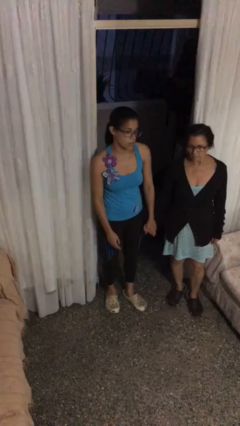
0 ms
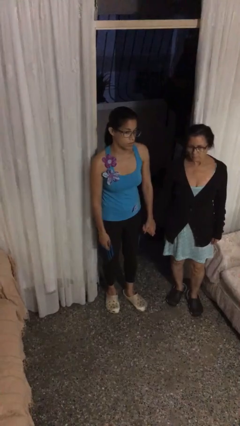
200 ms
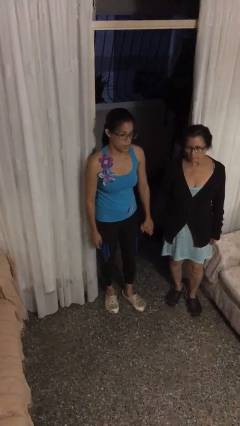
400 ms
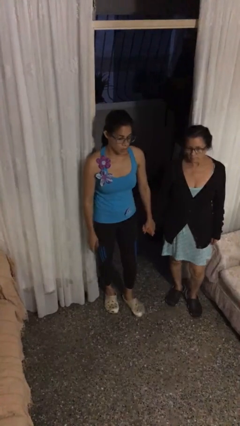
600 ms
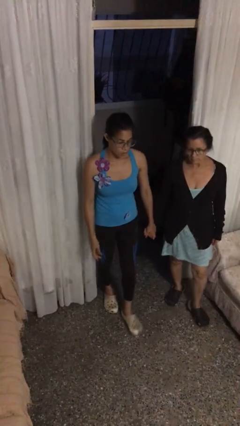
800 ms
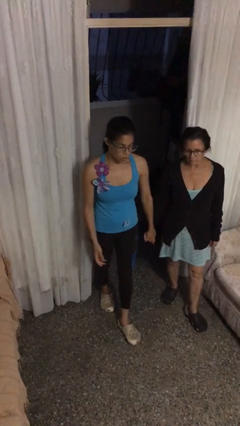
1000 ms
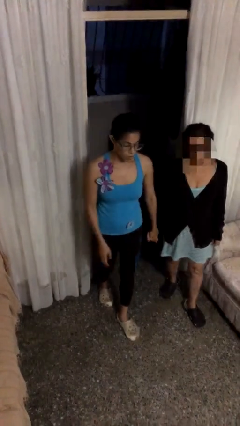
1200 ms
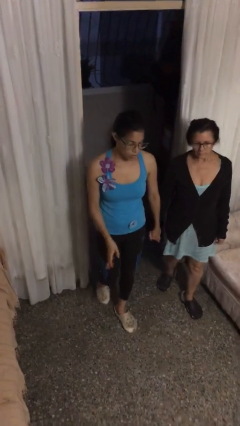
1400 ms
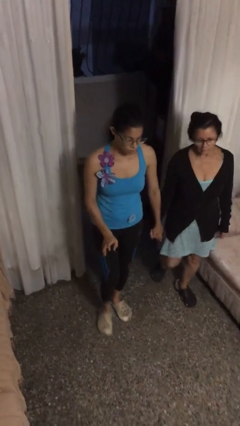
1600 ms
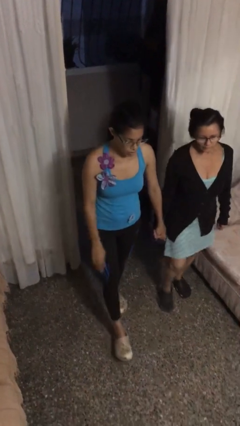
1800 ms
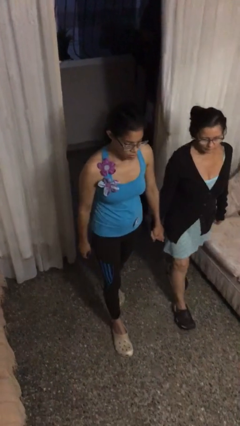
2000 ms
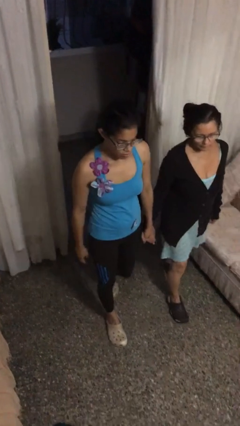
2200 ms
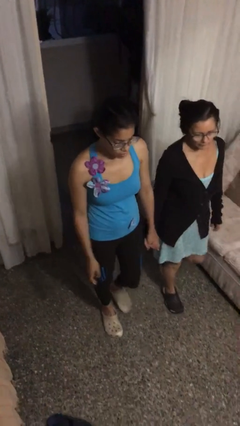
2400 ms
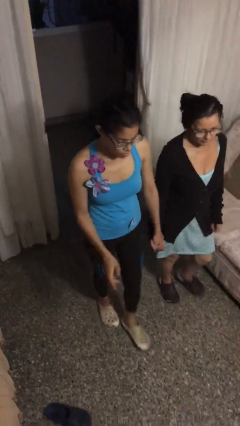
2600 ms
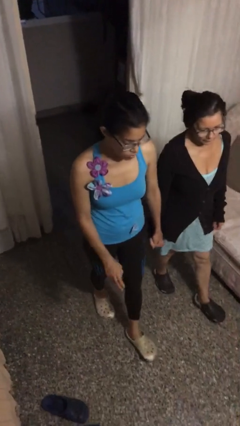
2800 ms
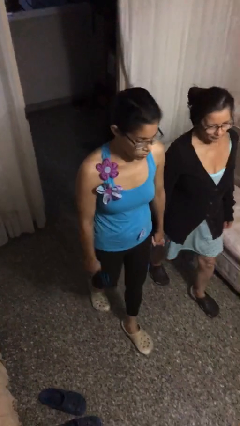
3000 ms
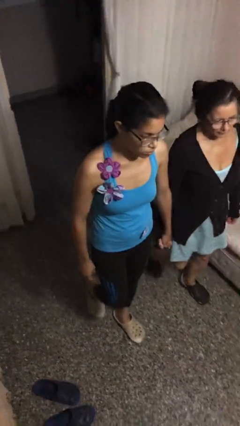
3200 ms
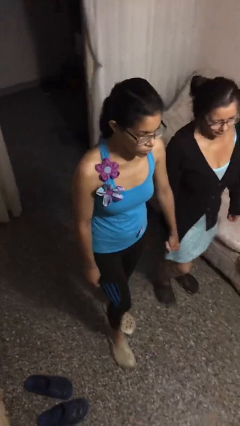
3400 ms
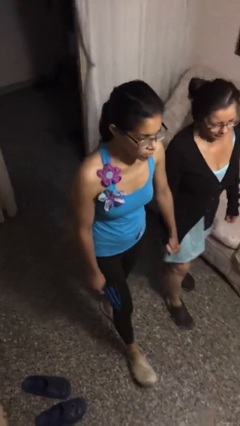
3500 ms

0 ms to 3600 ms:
person holds hand

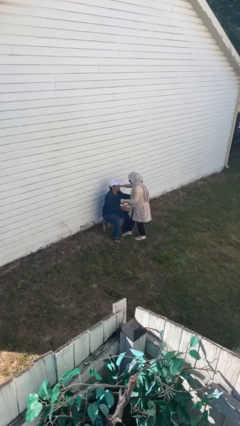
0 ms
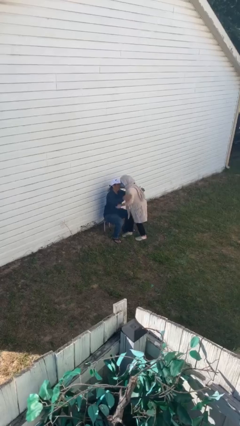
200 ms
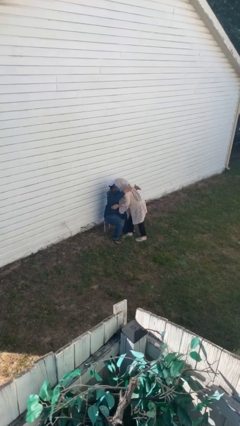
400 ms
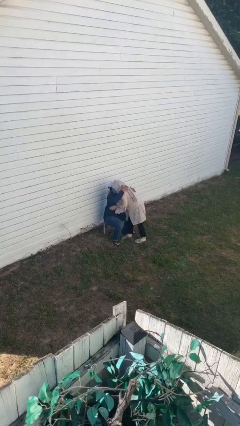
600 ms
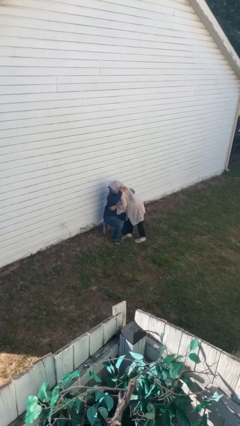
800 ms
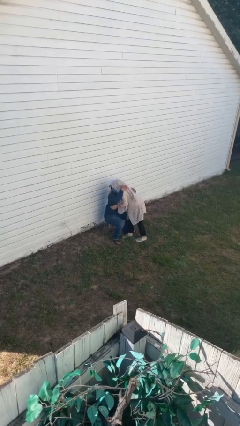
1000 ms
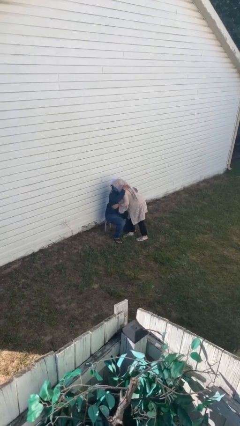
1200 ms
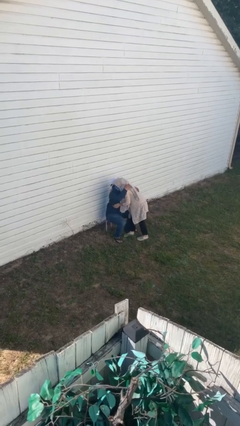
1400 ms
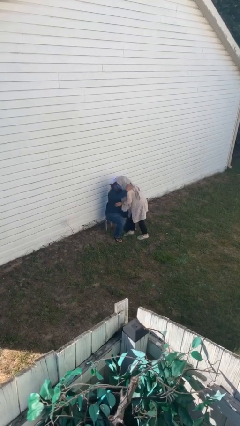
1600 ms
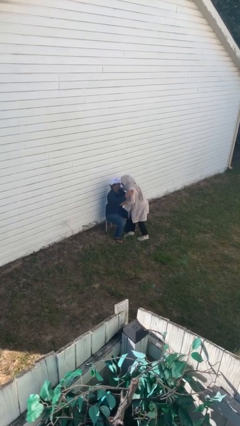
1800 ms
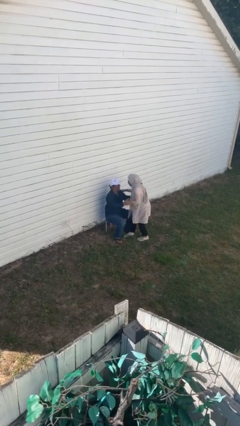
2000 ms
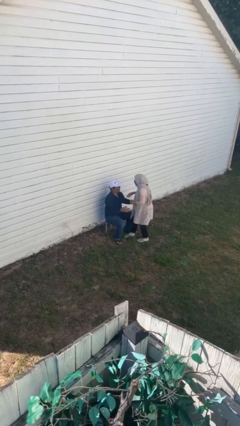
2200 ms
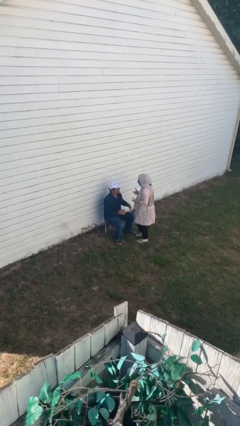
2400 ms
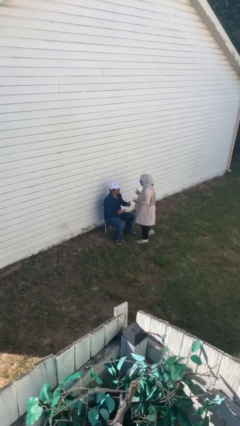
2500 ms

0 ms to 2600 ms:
person embraces person

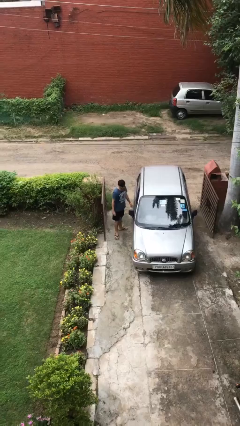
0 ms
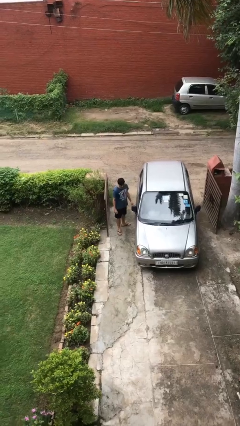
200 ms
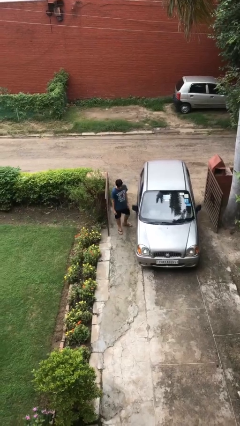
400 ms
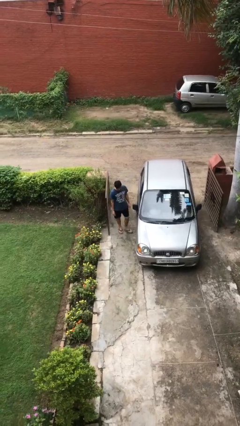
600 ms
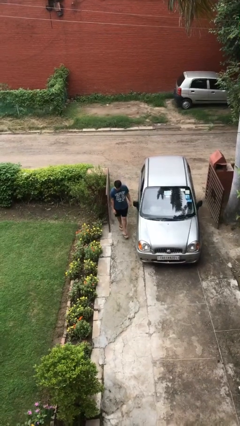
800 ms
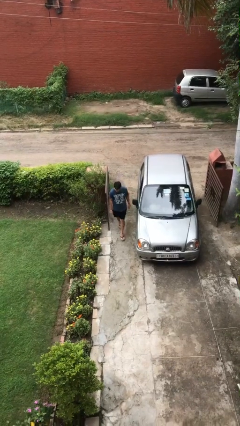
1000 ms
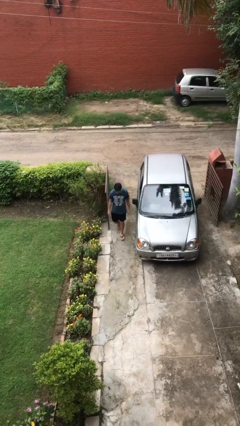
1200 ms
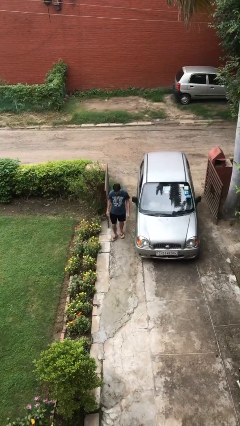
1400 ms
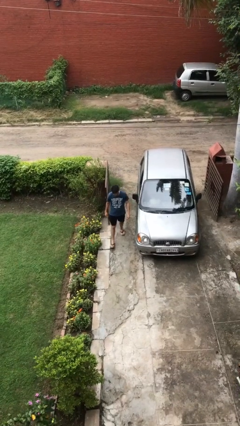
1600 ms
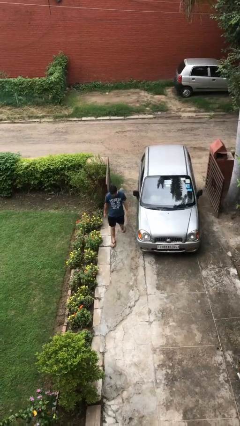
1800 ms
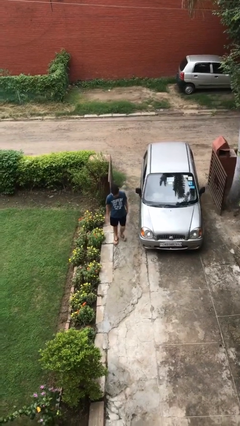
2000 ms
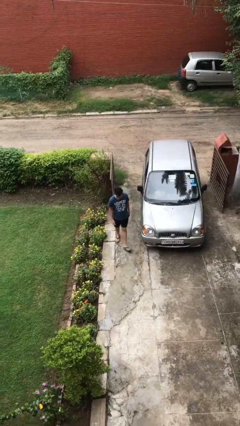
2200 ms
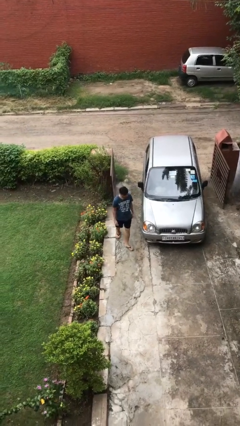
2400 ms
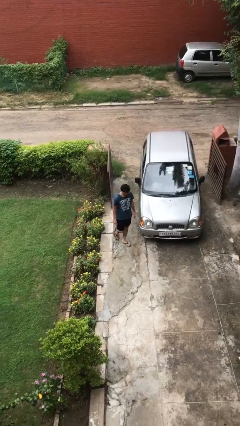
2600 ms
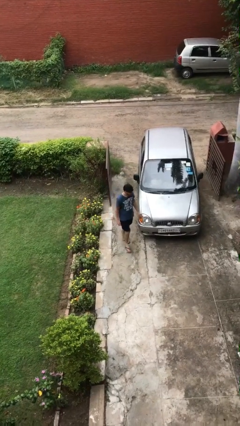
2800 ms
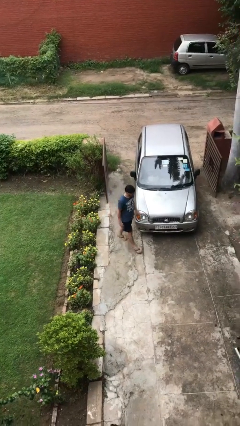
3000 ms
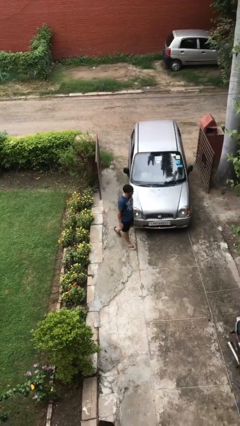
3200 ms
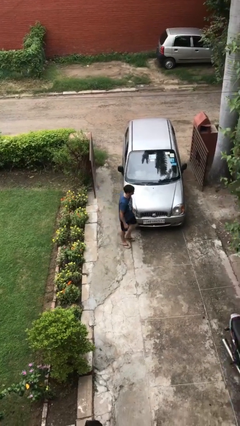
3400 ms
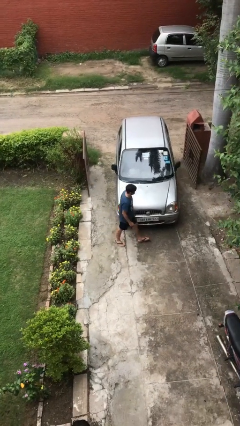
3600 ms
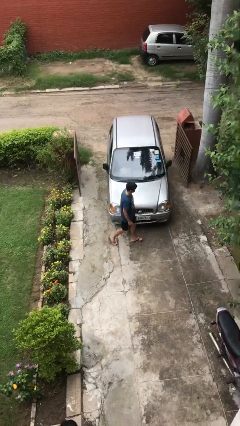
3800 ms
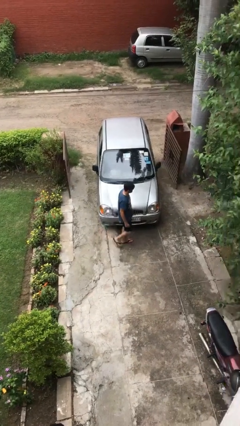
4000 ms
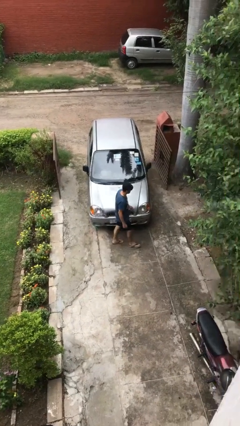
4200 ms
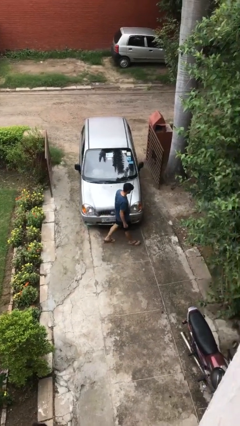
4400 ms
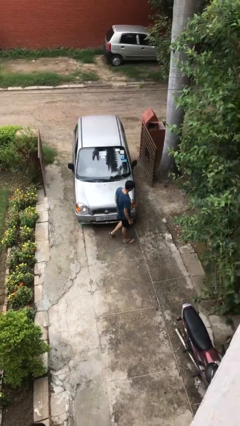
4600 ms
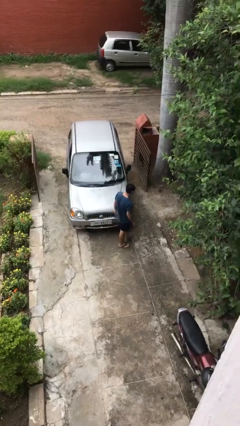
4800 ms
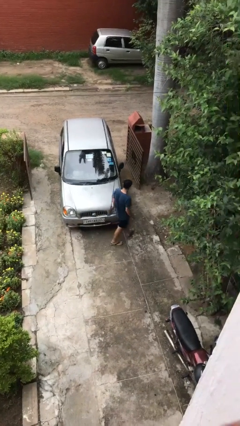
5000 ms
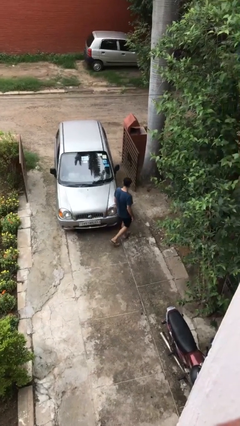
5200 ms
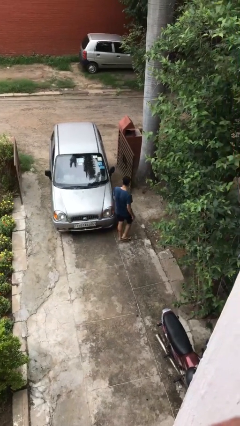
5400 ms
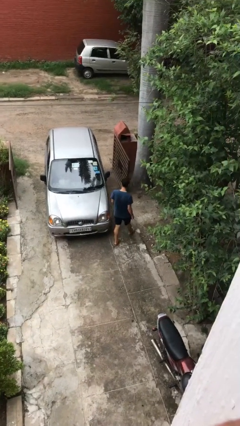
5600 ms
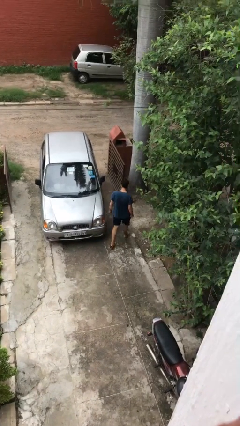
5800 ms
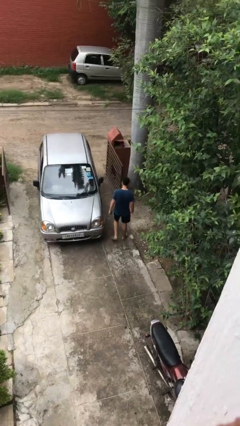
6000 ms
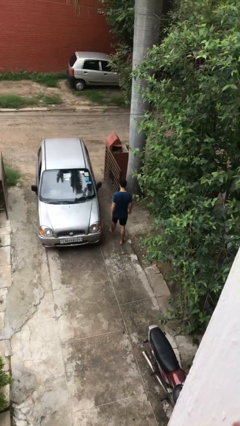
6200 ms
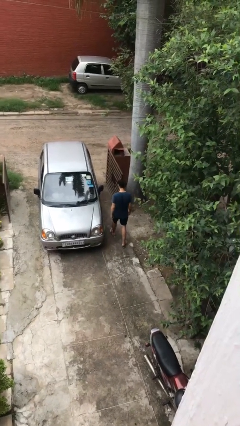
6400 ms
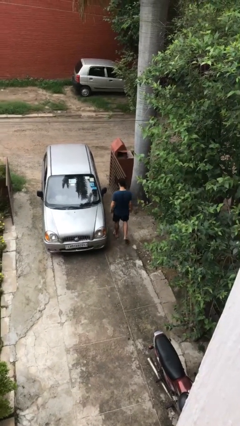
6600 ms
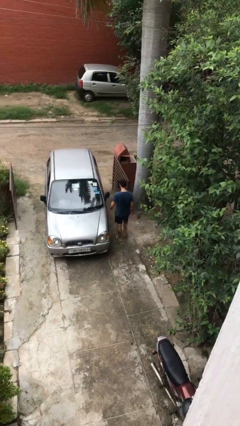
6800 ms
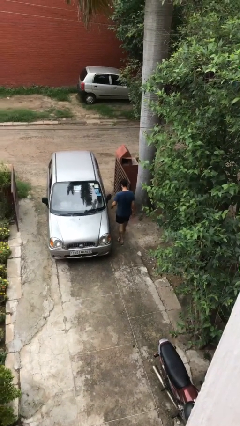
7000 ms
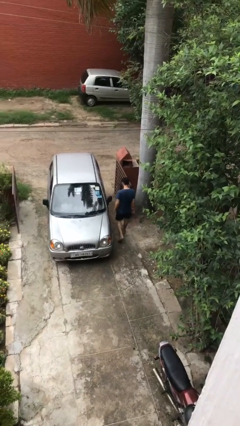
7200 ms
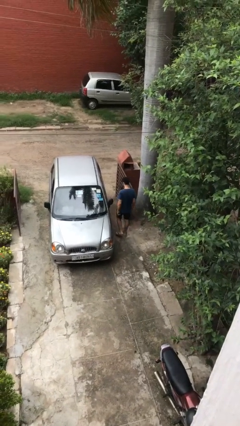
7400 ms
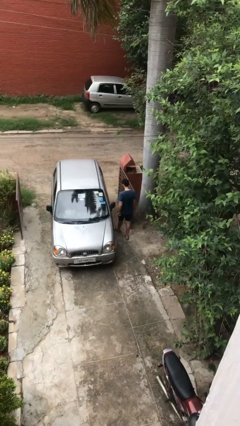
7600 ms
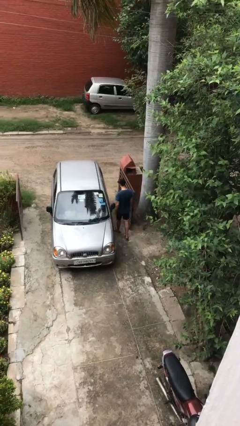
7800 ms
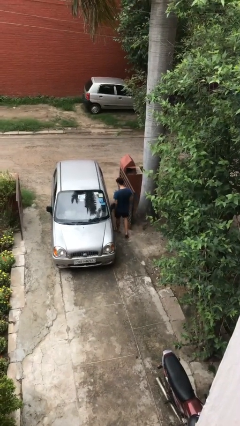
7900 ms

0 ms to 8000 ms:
person walks around car

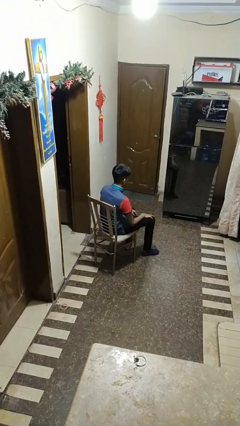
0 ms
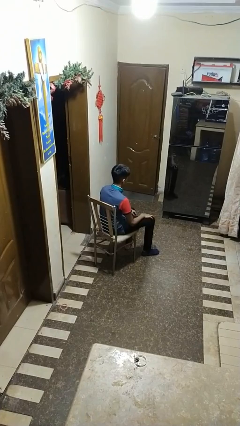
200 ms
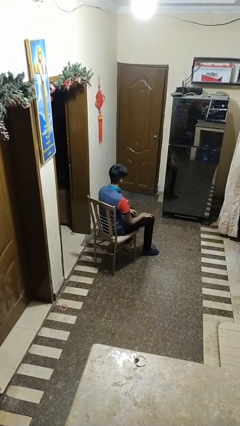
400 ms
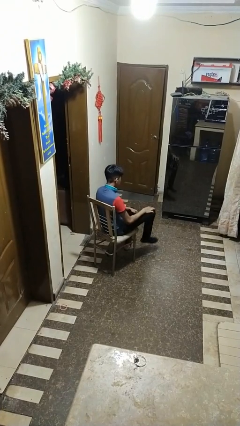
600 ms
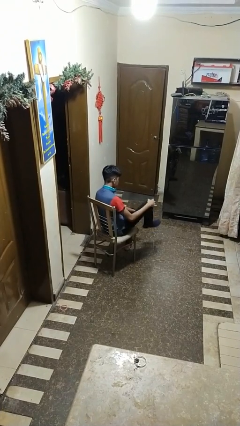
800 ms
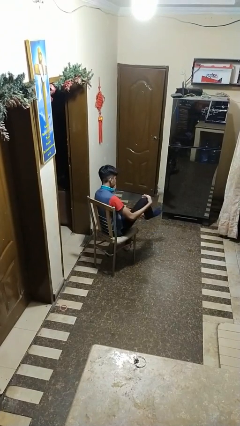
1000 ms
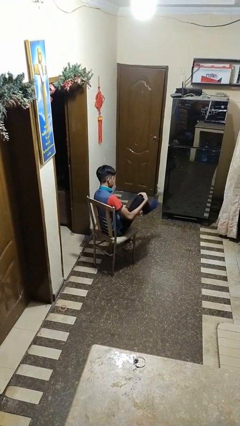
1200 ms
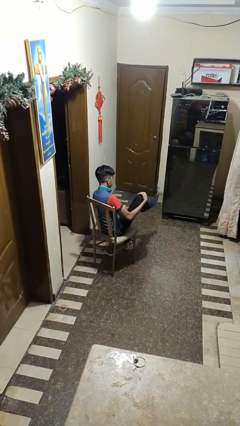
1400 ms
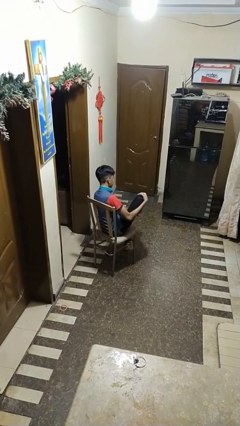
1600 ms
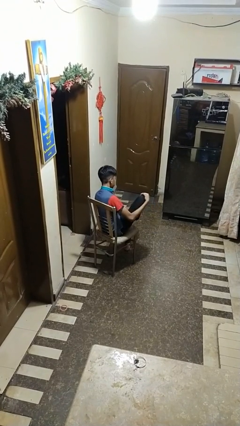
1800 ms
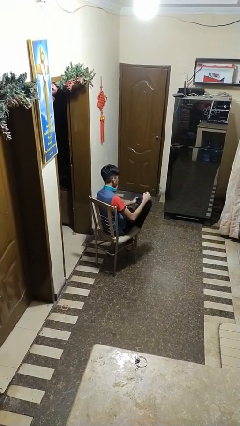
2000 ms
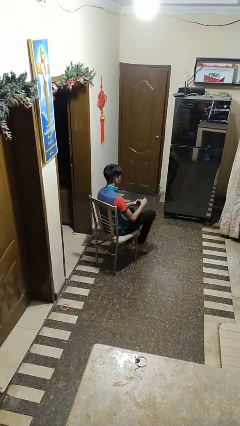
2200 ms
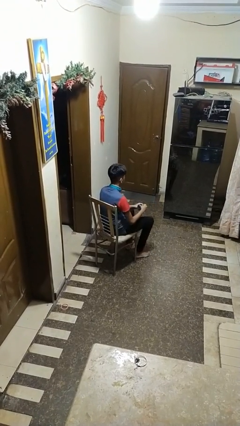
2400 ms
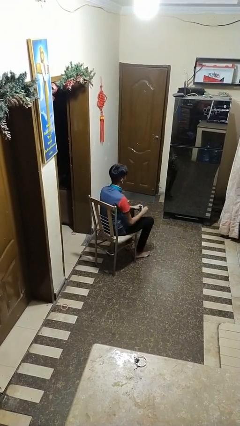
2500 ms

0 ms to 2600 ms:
person takes off socks

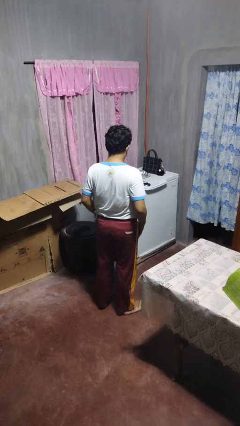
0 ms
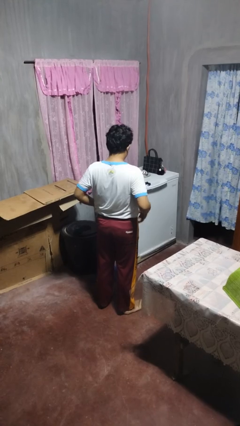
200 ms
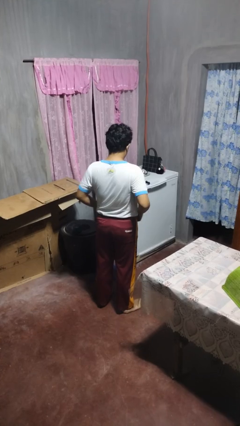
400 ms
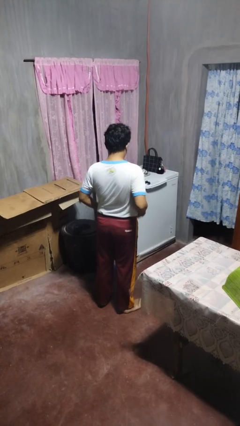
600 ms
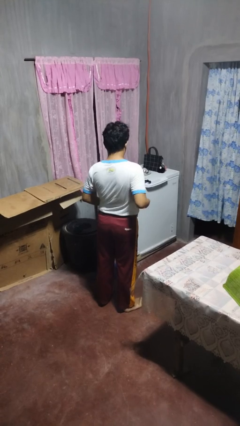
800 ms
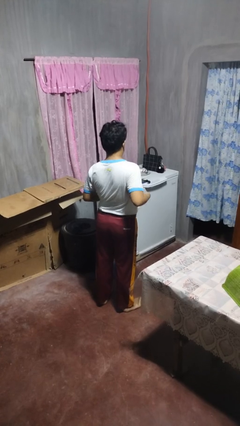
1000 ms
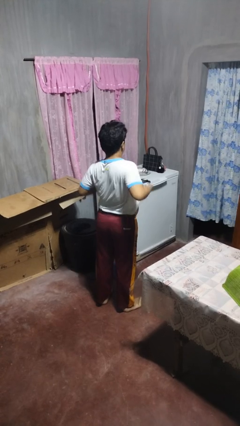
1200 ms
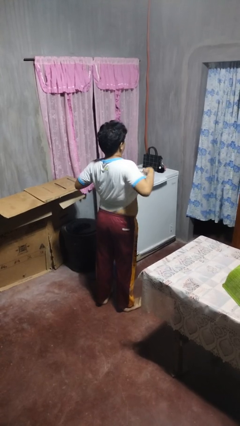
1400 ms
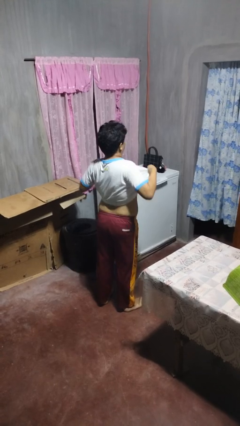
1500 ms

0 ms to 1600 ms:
person untucks shirt
